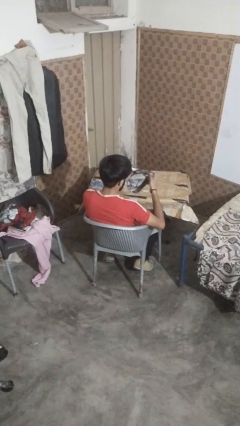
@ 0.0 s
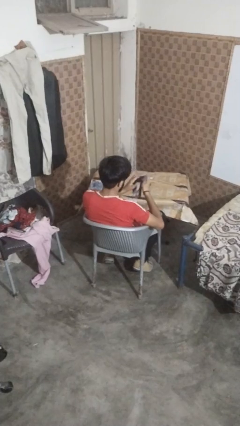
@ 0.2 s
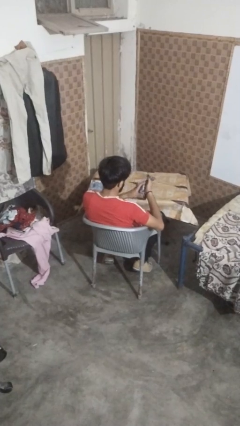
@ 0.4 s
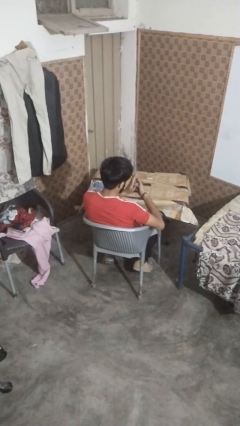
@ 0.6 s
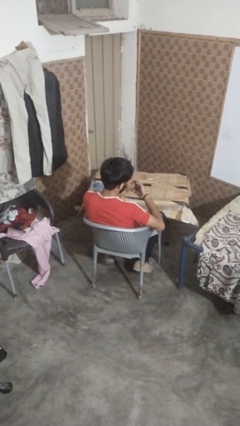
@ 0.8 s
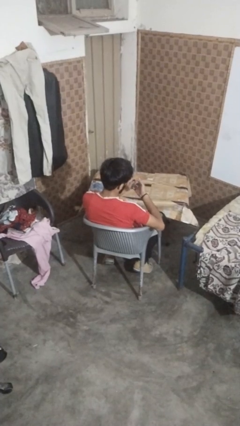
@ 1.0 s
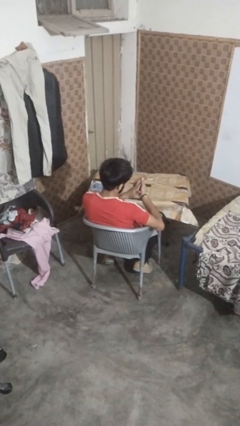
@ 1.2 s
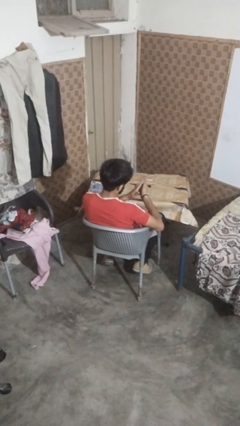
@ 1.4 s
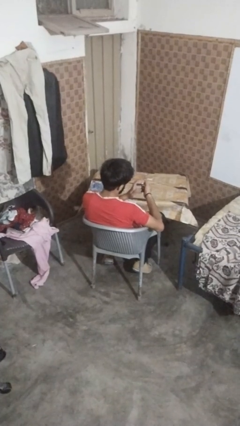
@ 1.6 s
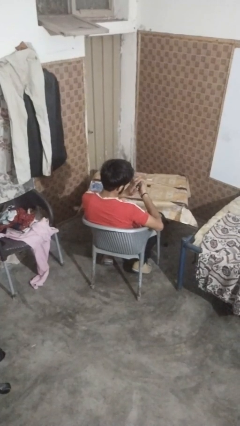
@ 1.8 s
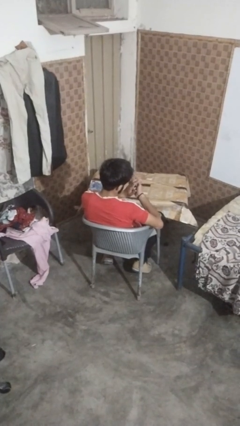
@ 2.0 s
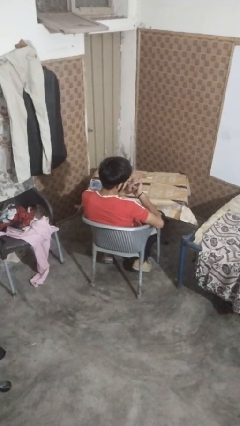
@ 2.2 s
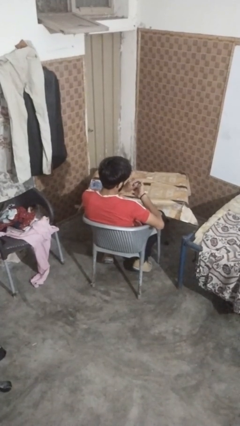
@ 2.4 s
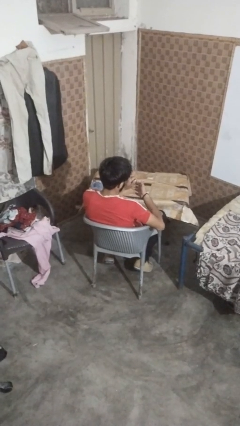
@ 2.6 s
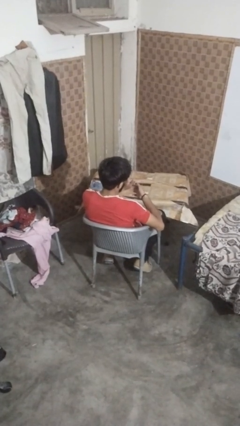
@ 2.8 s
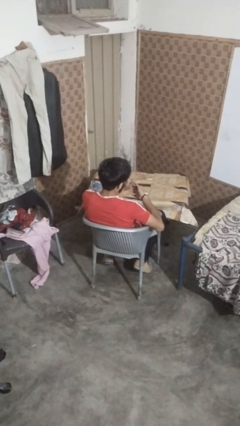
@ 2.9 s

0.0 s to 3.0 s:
person crumples paper

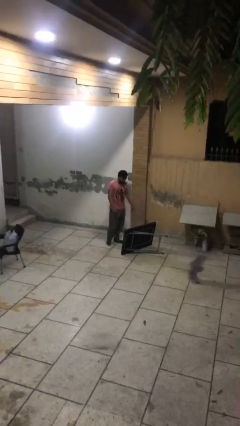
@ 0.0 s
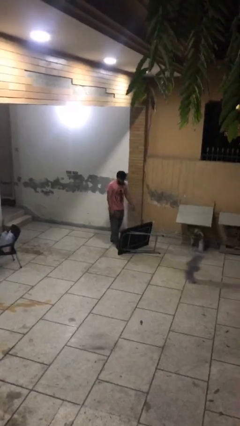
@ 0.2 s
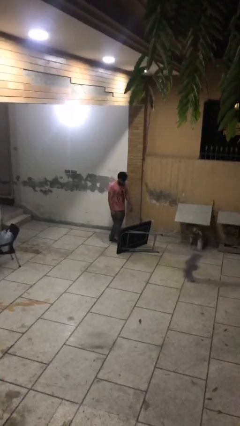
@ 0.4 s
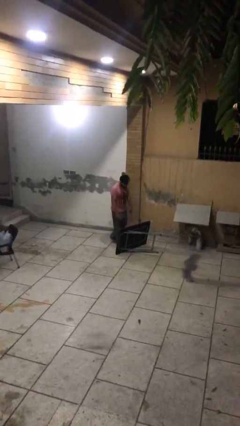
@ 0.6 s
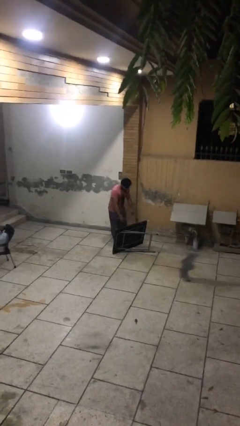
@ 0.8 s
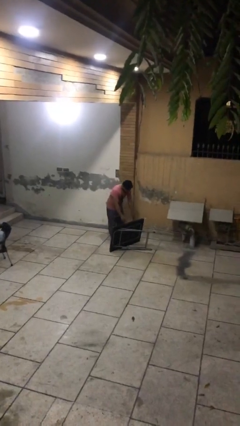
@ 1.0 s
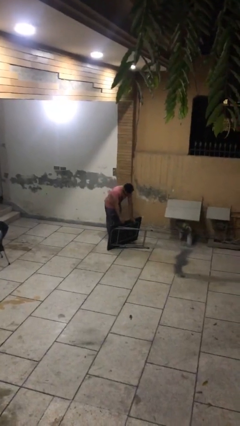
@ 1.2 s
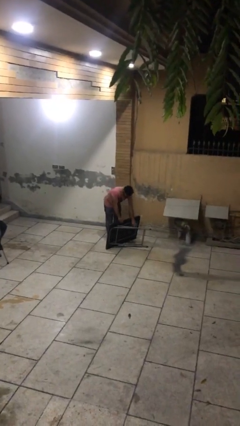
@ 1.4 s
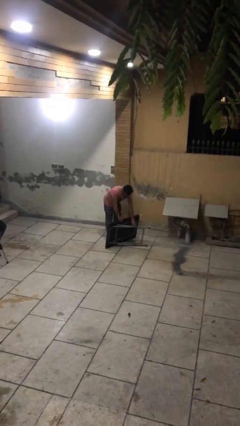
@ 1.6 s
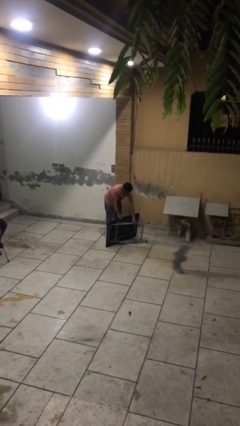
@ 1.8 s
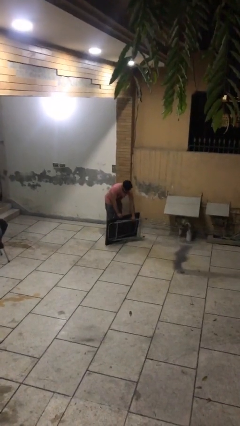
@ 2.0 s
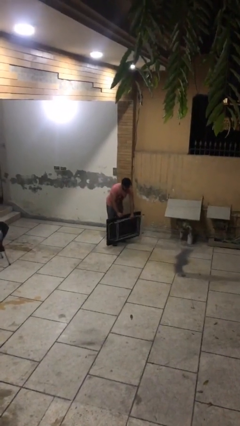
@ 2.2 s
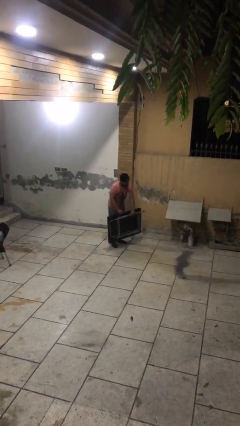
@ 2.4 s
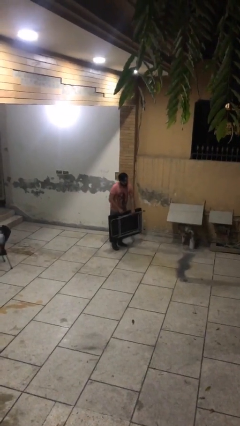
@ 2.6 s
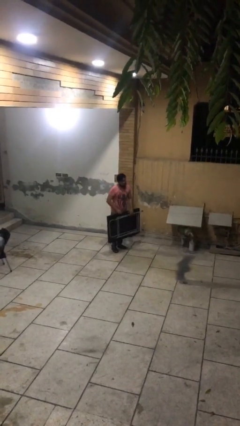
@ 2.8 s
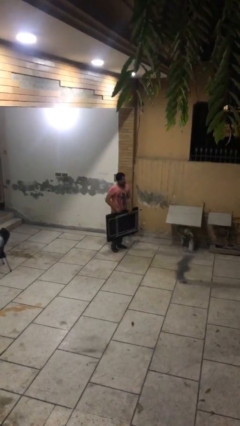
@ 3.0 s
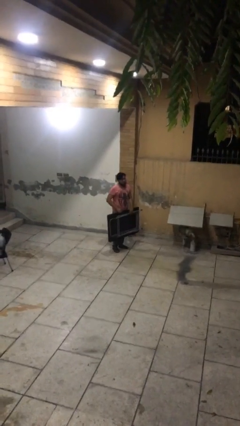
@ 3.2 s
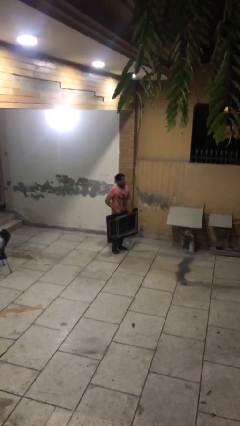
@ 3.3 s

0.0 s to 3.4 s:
person picks up object from floor

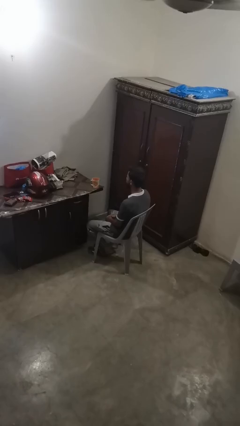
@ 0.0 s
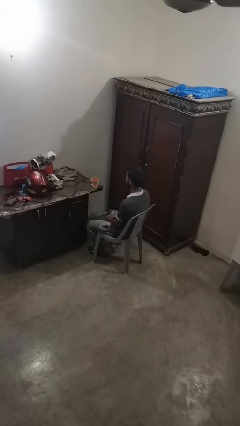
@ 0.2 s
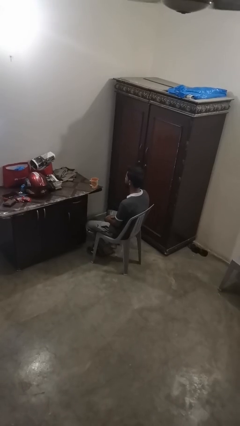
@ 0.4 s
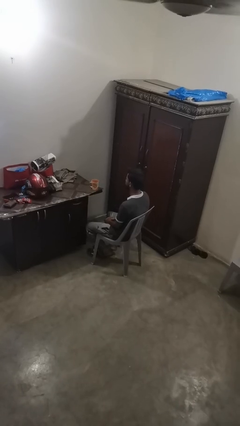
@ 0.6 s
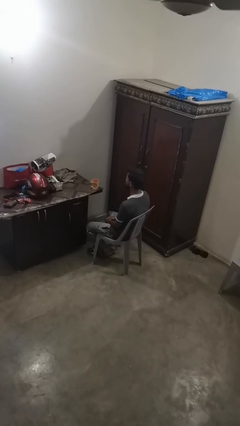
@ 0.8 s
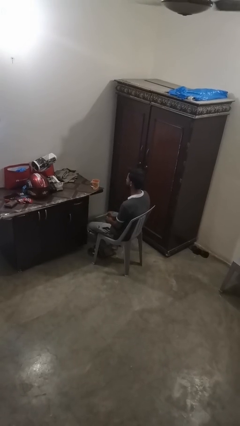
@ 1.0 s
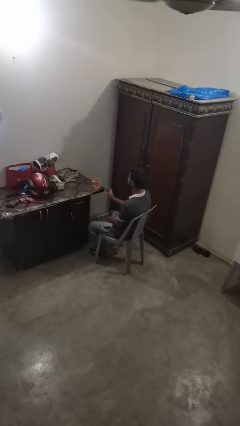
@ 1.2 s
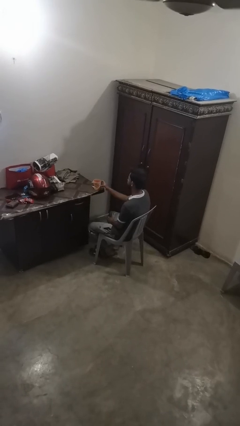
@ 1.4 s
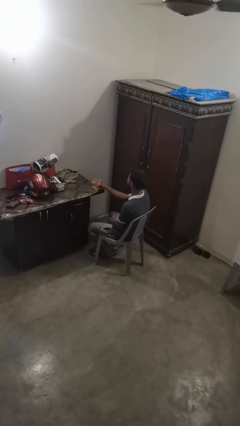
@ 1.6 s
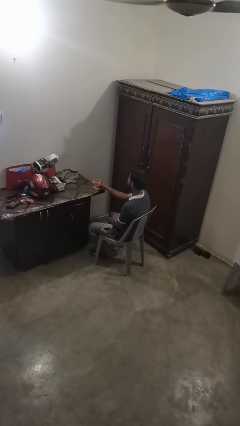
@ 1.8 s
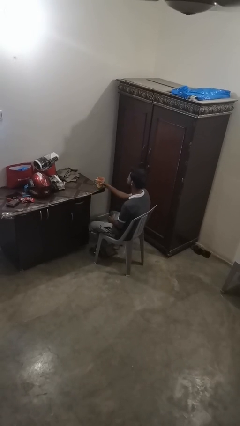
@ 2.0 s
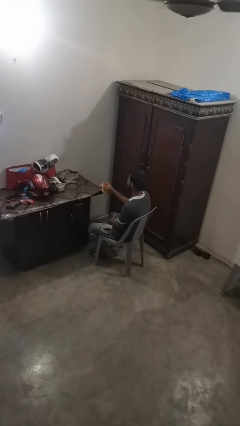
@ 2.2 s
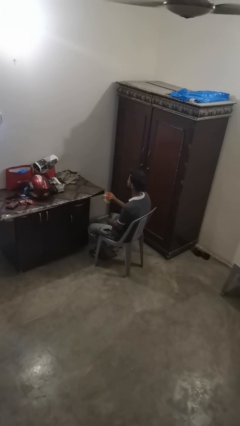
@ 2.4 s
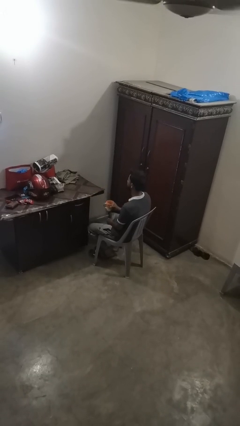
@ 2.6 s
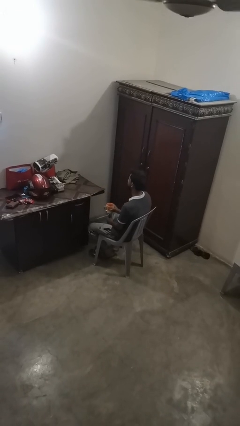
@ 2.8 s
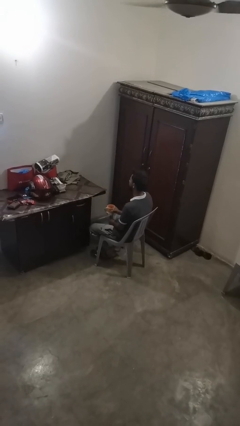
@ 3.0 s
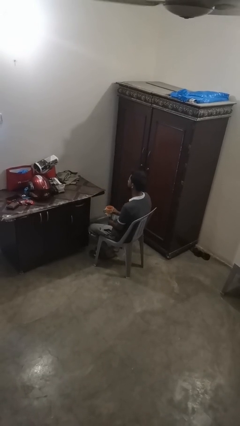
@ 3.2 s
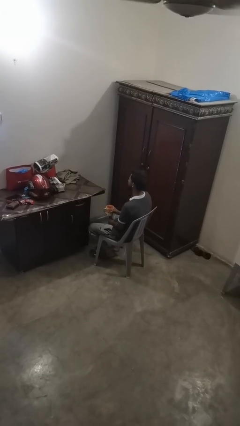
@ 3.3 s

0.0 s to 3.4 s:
person picks up object from table

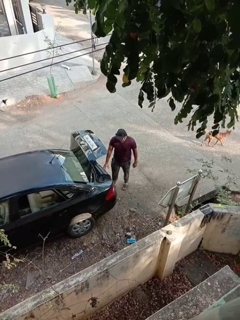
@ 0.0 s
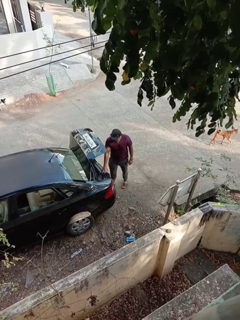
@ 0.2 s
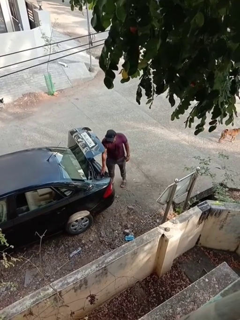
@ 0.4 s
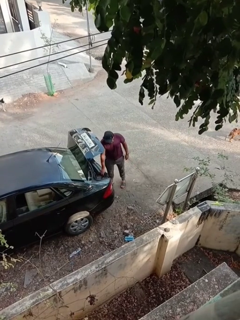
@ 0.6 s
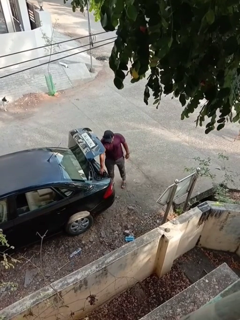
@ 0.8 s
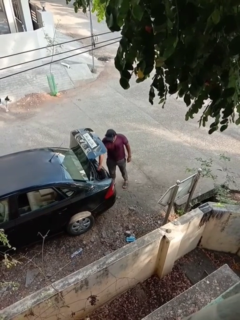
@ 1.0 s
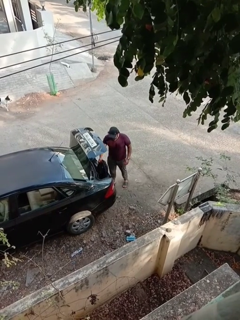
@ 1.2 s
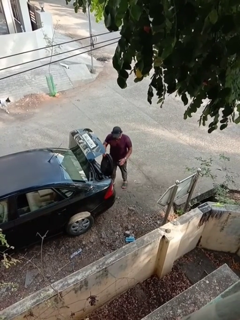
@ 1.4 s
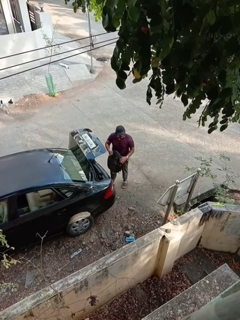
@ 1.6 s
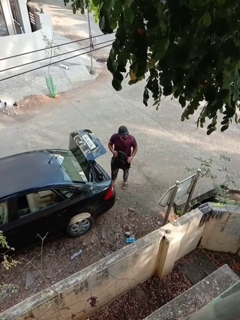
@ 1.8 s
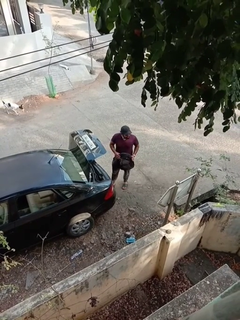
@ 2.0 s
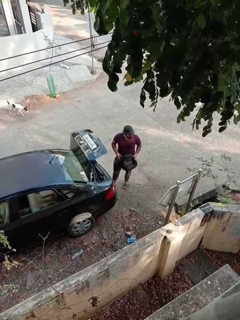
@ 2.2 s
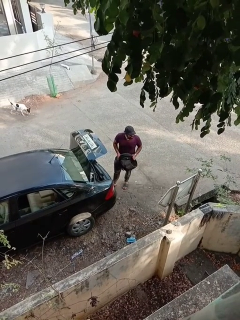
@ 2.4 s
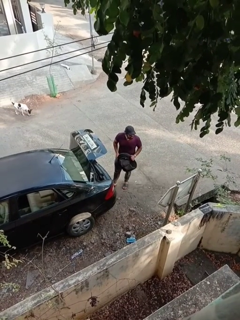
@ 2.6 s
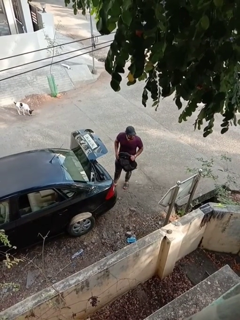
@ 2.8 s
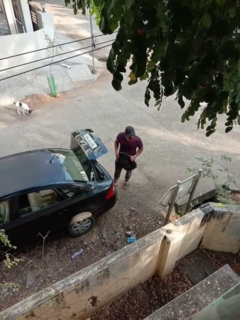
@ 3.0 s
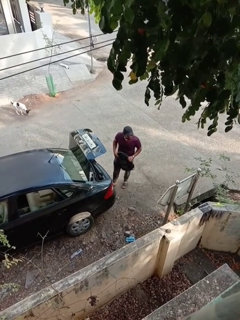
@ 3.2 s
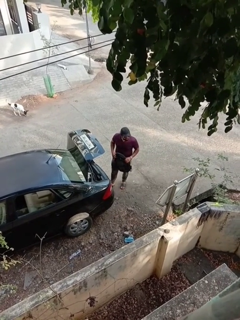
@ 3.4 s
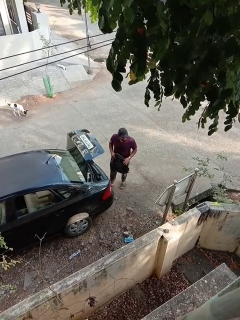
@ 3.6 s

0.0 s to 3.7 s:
person unloads car

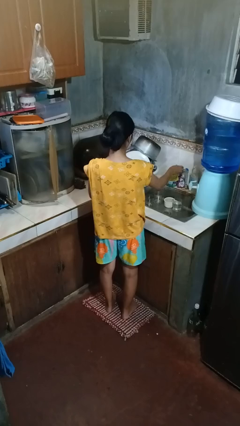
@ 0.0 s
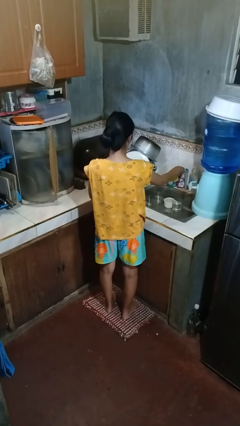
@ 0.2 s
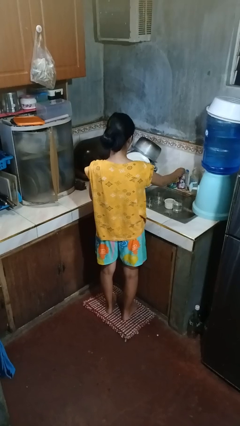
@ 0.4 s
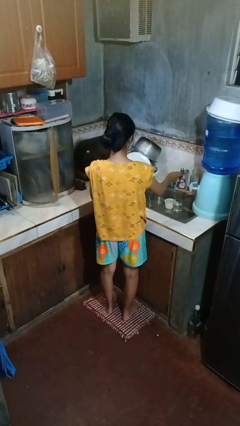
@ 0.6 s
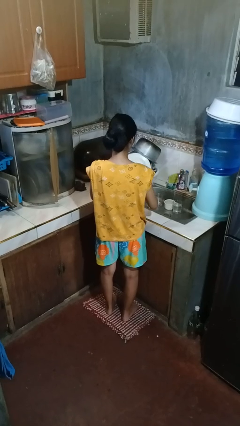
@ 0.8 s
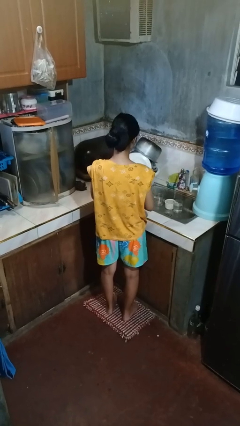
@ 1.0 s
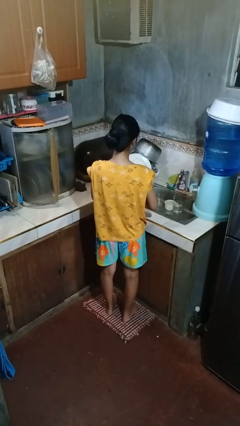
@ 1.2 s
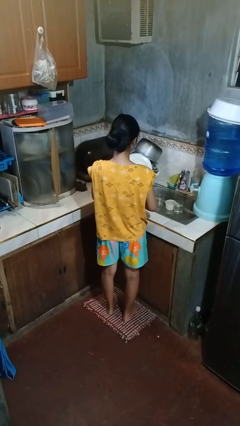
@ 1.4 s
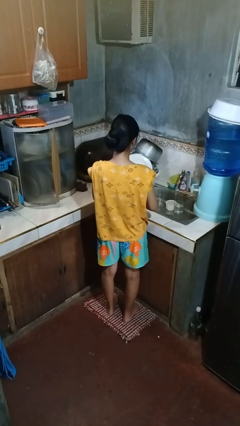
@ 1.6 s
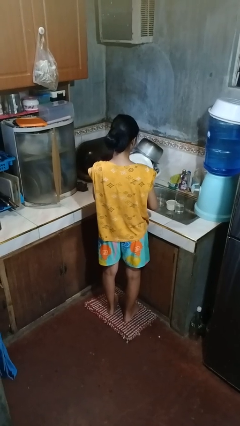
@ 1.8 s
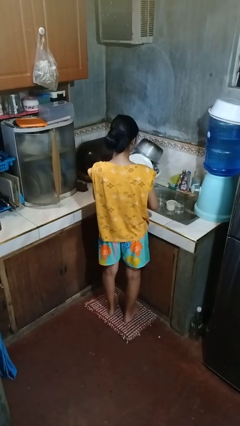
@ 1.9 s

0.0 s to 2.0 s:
person turns on faucet

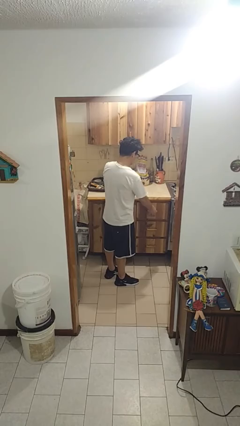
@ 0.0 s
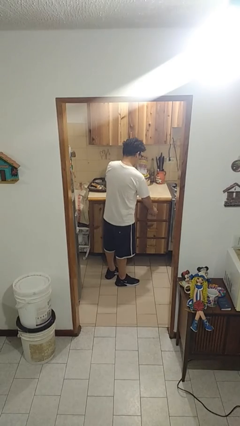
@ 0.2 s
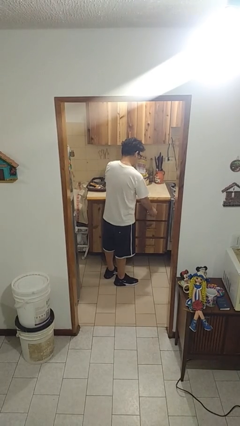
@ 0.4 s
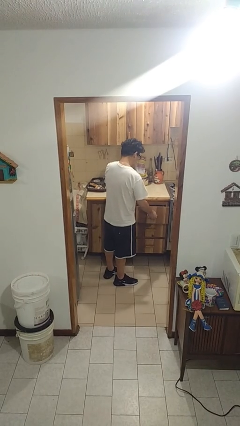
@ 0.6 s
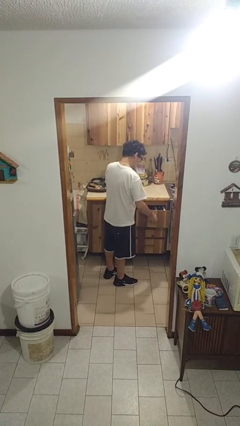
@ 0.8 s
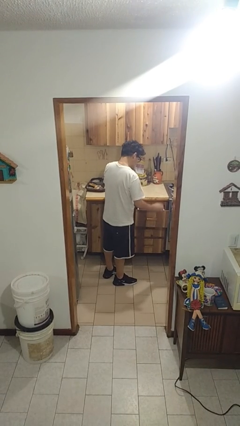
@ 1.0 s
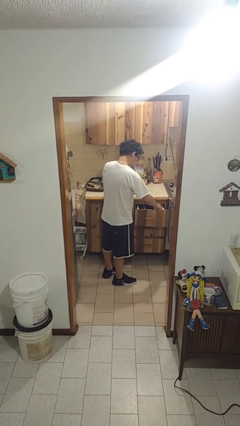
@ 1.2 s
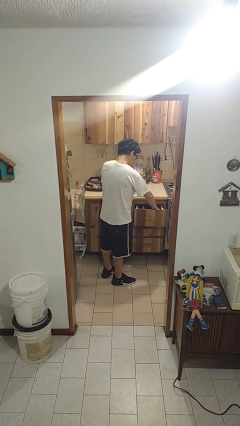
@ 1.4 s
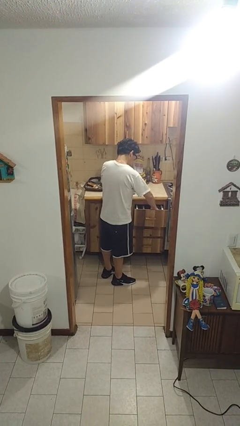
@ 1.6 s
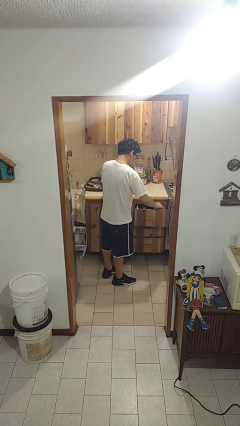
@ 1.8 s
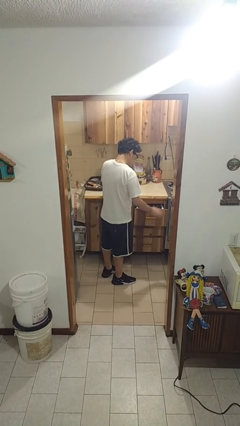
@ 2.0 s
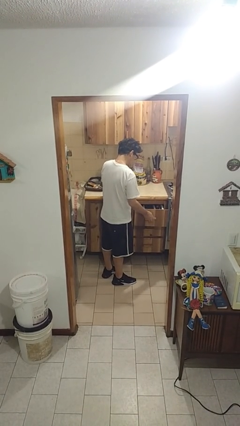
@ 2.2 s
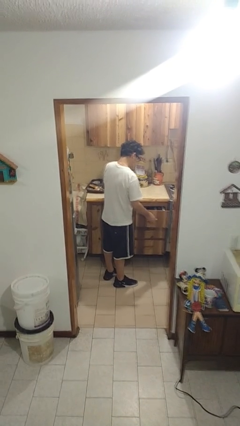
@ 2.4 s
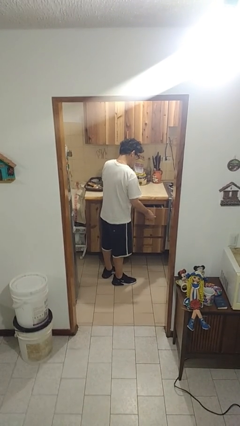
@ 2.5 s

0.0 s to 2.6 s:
person searches in kitchen drawer

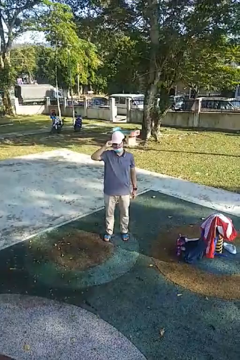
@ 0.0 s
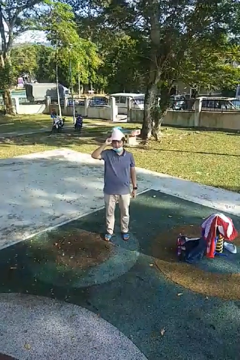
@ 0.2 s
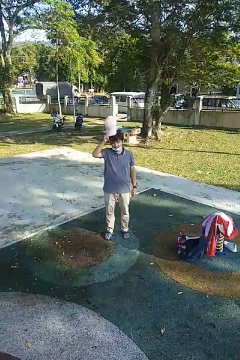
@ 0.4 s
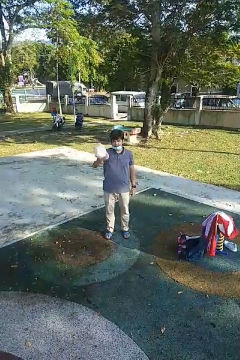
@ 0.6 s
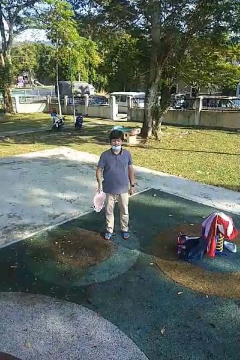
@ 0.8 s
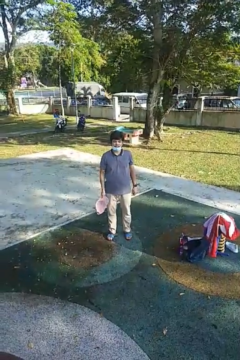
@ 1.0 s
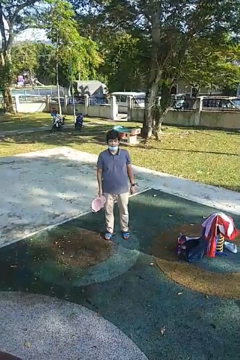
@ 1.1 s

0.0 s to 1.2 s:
person takes off hat
